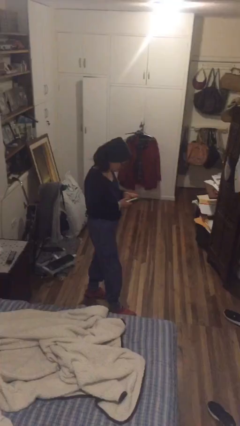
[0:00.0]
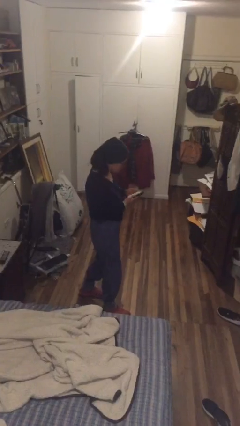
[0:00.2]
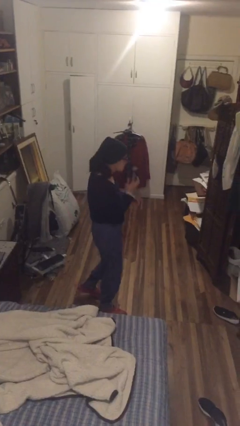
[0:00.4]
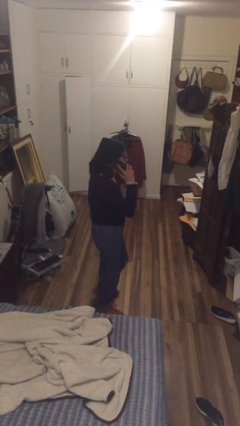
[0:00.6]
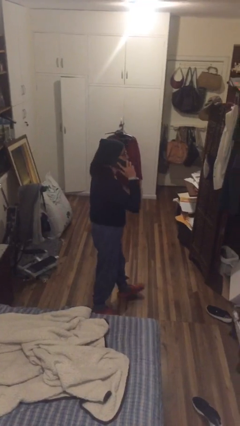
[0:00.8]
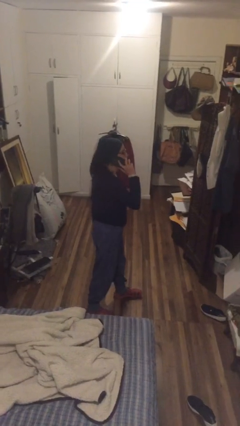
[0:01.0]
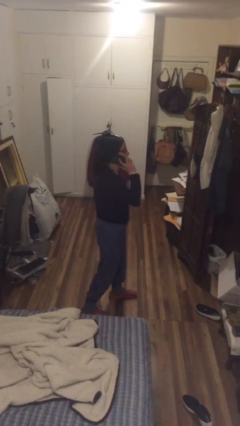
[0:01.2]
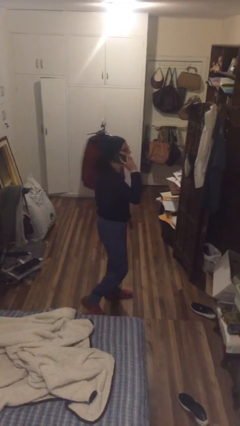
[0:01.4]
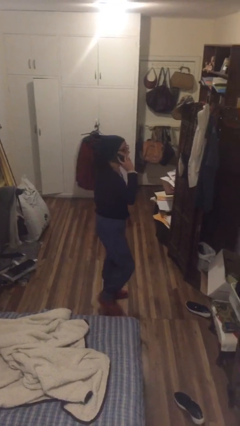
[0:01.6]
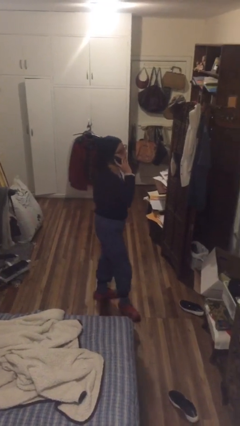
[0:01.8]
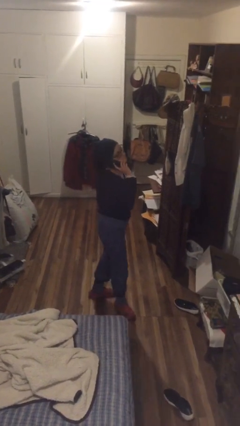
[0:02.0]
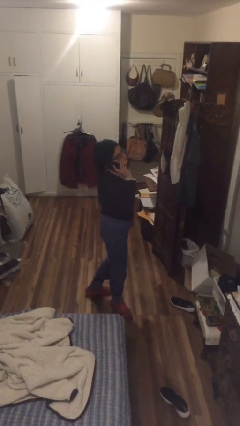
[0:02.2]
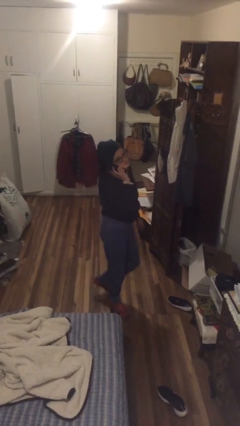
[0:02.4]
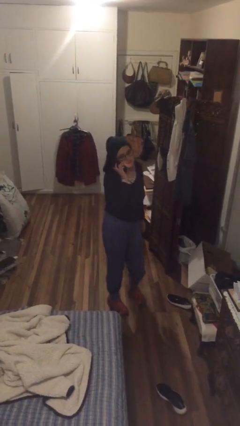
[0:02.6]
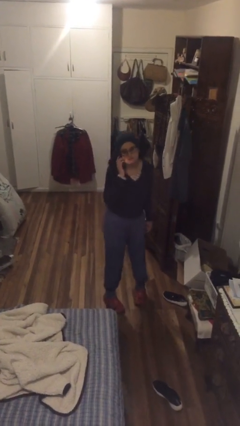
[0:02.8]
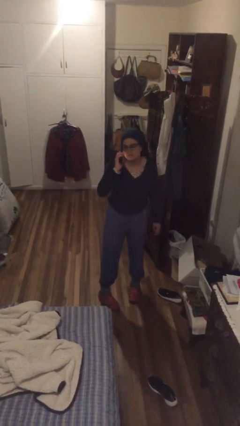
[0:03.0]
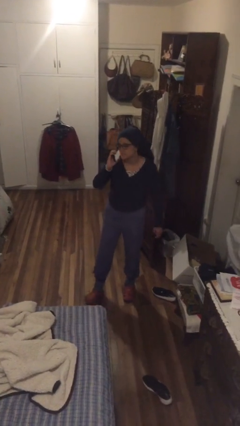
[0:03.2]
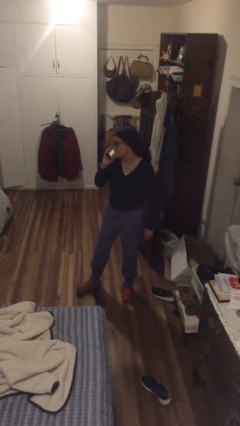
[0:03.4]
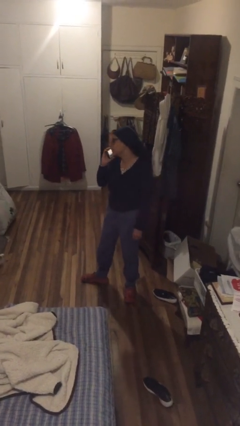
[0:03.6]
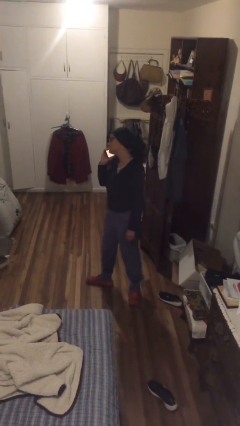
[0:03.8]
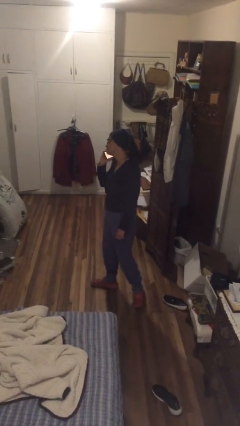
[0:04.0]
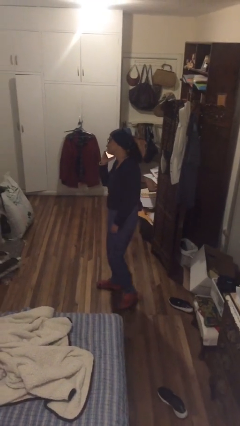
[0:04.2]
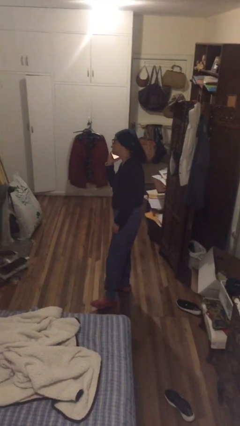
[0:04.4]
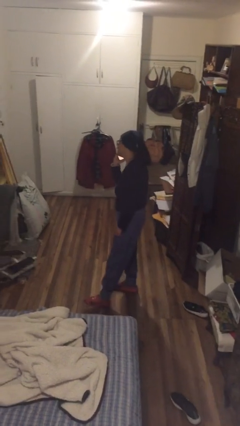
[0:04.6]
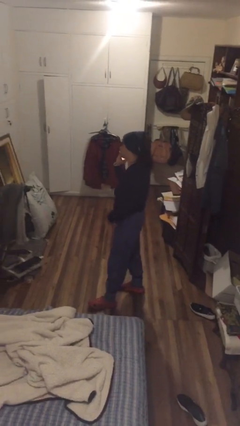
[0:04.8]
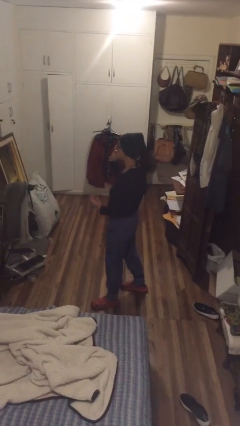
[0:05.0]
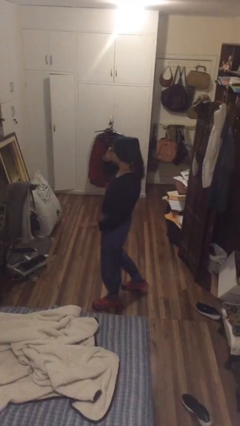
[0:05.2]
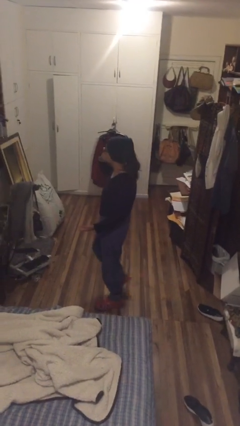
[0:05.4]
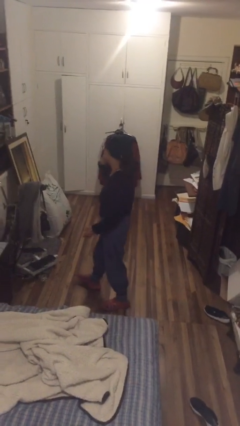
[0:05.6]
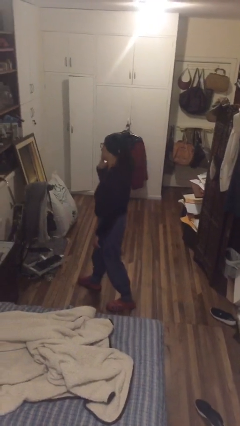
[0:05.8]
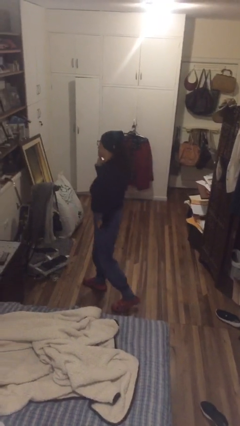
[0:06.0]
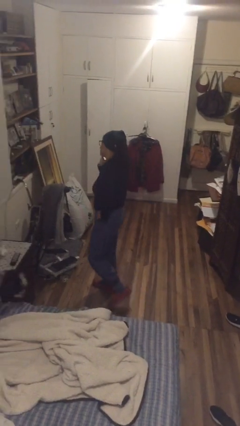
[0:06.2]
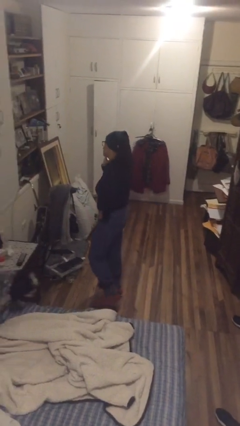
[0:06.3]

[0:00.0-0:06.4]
person talks on phone

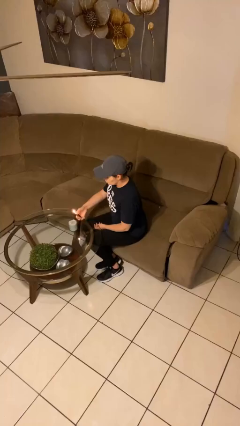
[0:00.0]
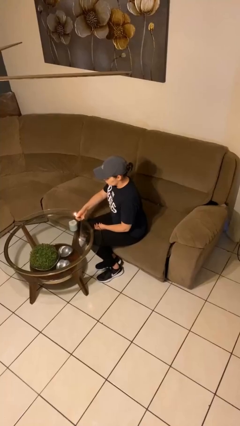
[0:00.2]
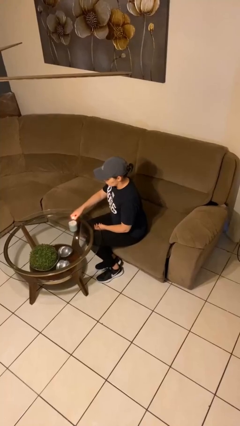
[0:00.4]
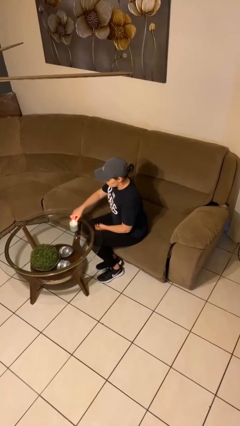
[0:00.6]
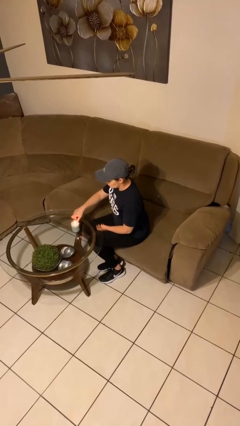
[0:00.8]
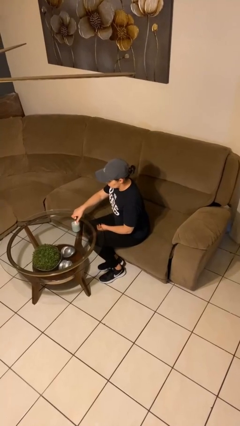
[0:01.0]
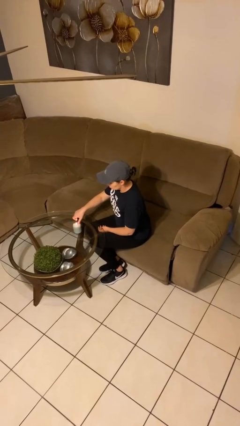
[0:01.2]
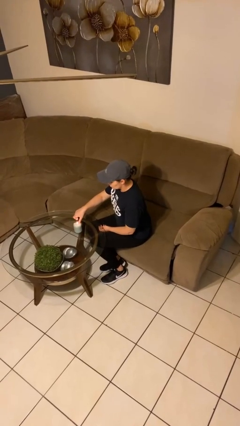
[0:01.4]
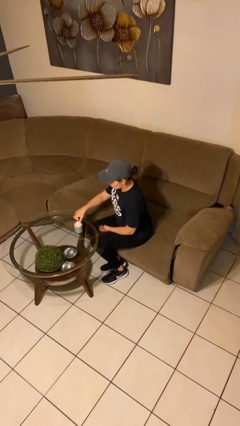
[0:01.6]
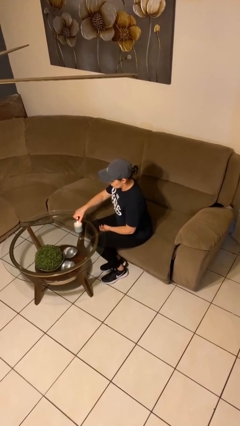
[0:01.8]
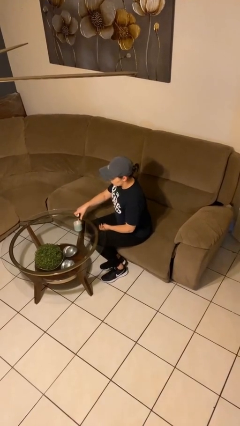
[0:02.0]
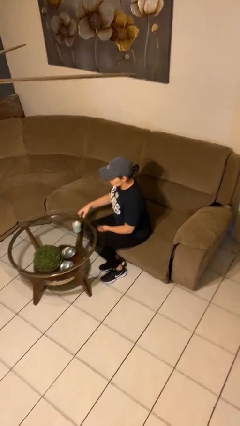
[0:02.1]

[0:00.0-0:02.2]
person lights candle

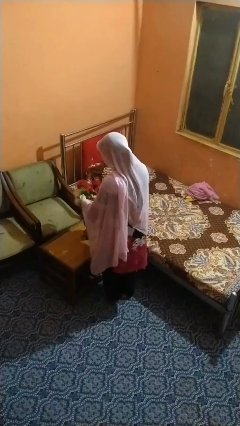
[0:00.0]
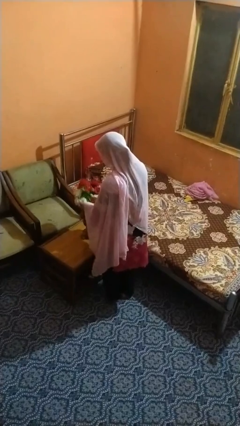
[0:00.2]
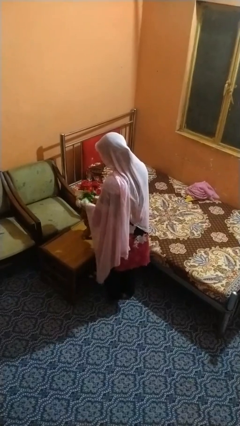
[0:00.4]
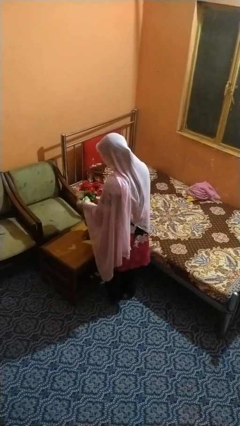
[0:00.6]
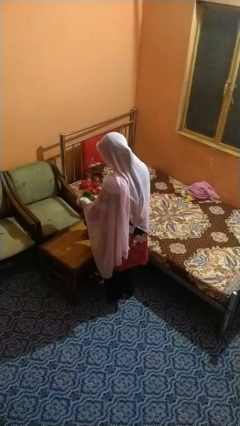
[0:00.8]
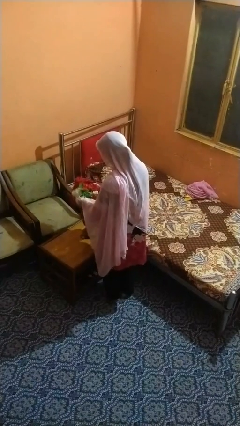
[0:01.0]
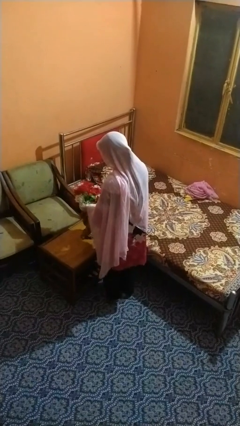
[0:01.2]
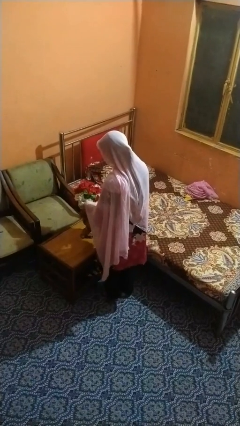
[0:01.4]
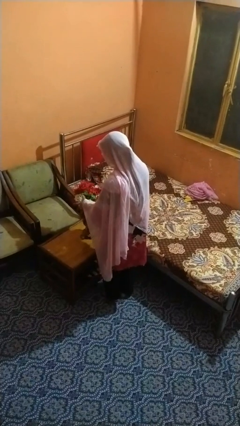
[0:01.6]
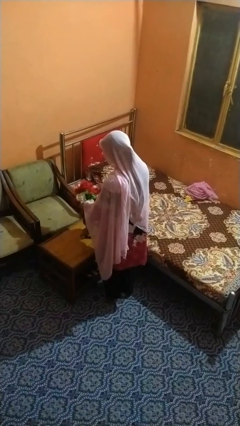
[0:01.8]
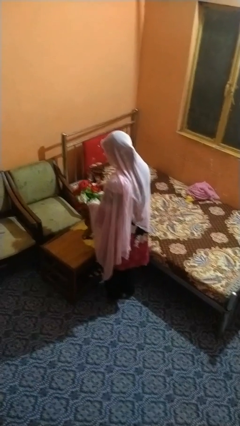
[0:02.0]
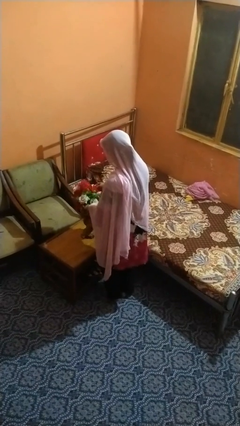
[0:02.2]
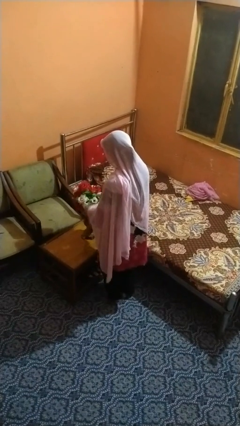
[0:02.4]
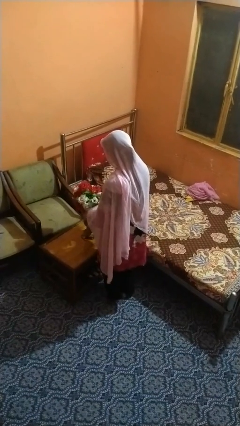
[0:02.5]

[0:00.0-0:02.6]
person arranges flowers in vase

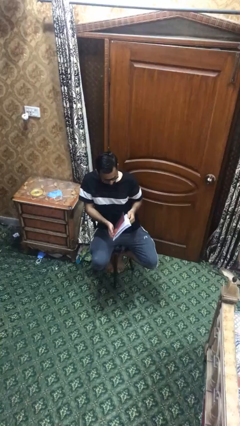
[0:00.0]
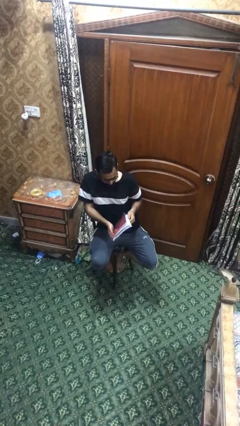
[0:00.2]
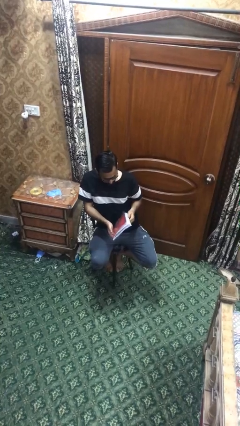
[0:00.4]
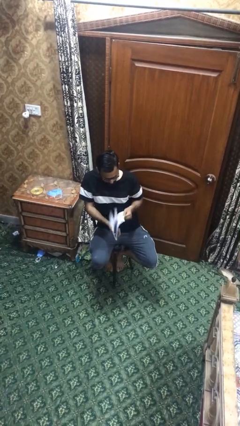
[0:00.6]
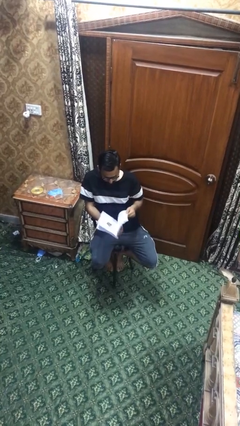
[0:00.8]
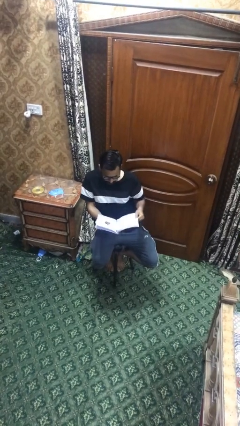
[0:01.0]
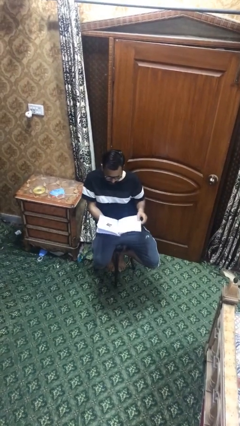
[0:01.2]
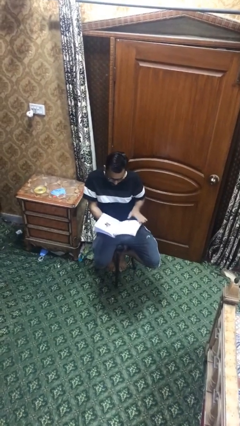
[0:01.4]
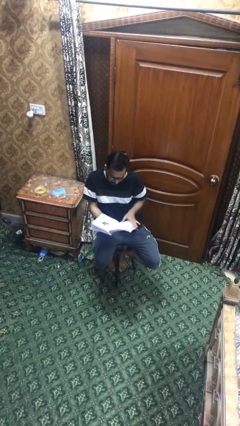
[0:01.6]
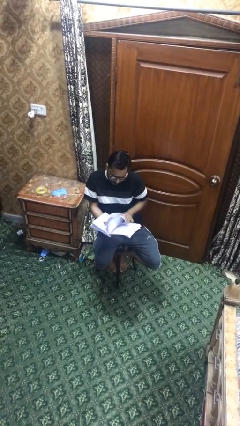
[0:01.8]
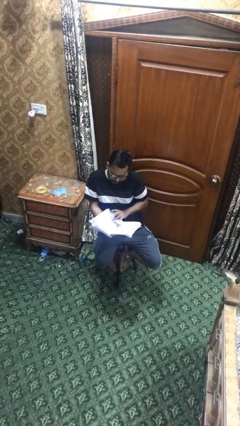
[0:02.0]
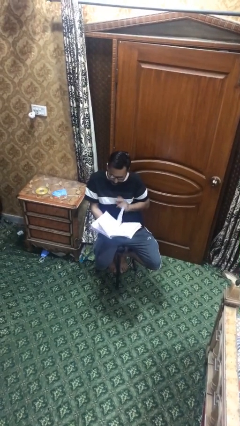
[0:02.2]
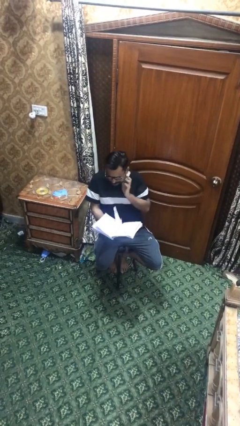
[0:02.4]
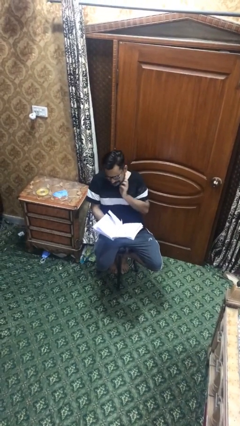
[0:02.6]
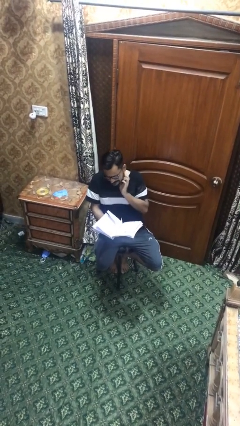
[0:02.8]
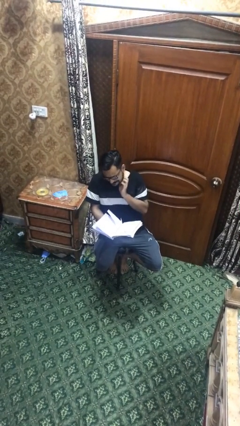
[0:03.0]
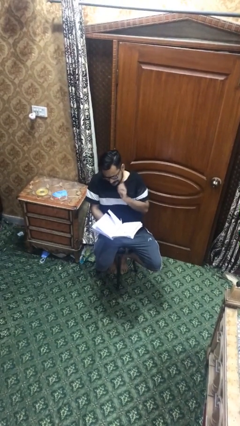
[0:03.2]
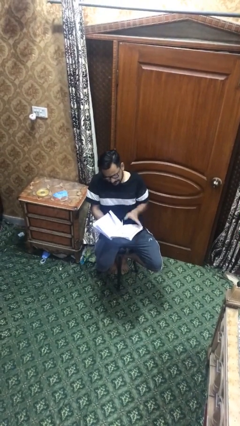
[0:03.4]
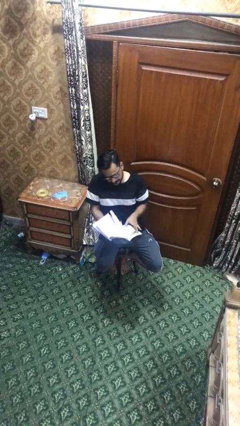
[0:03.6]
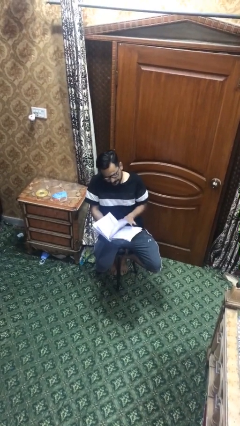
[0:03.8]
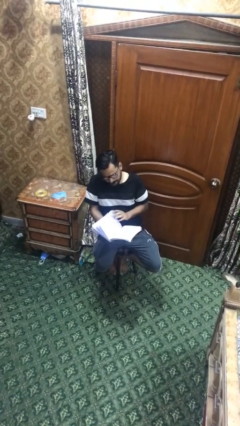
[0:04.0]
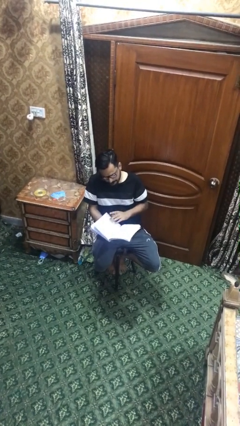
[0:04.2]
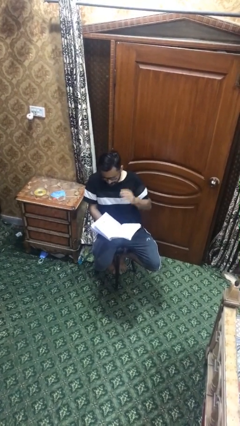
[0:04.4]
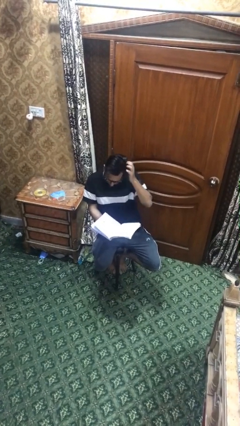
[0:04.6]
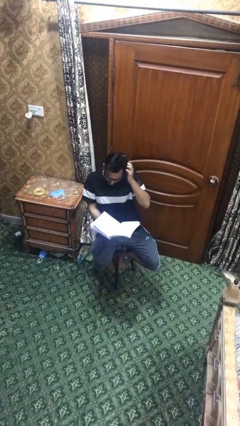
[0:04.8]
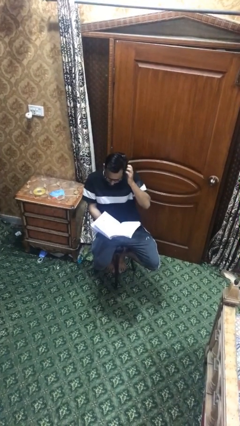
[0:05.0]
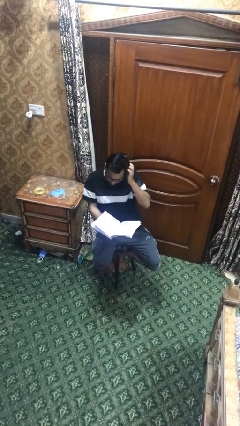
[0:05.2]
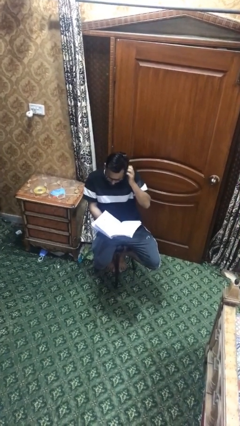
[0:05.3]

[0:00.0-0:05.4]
person reads document

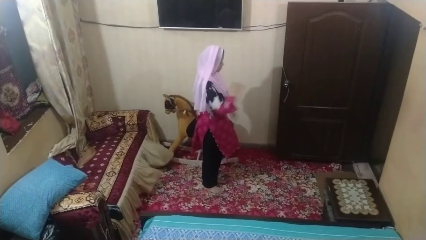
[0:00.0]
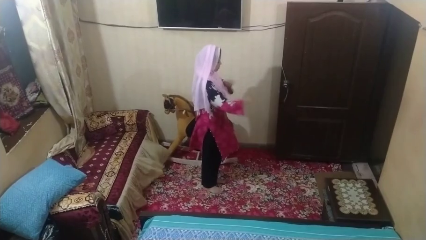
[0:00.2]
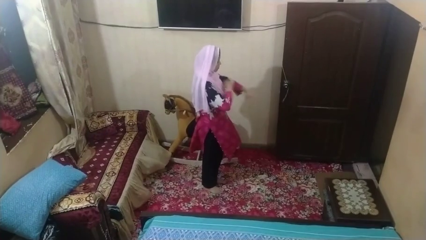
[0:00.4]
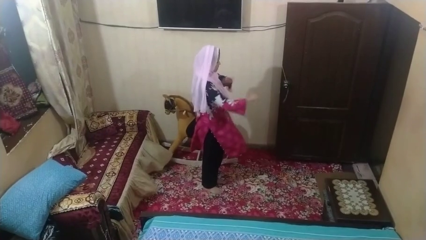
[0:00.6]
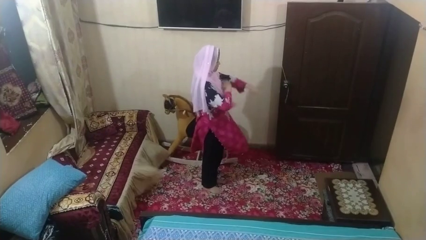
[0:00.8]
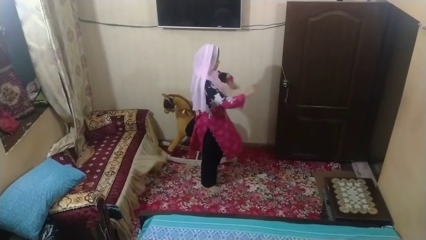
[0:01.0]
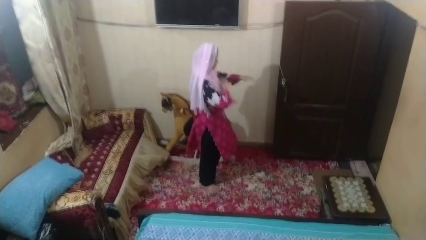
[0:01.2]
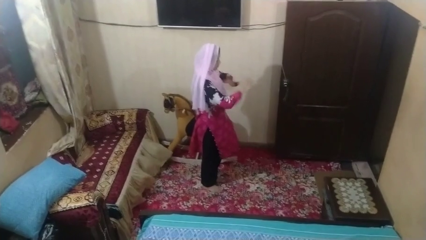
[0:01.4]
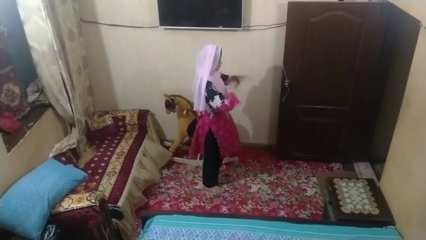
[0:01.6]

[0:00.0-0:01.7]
person karate chop
